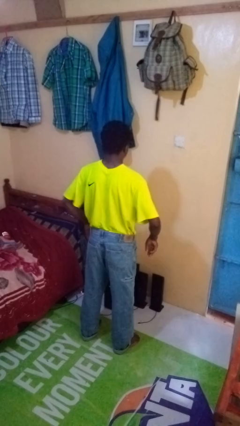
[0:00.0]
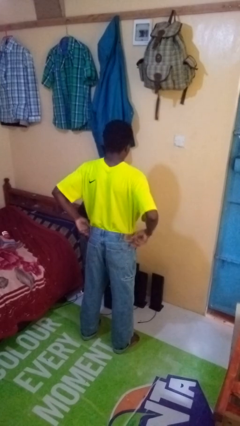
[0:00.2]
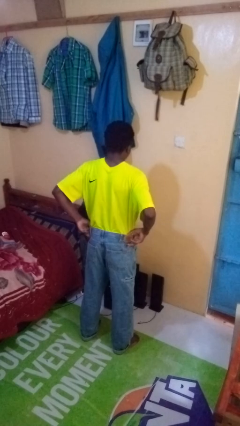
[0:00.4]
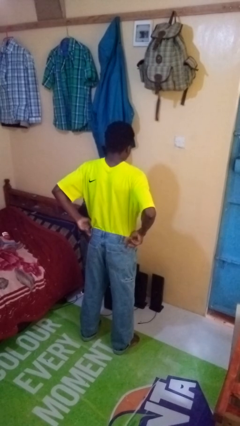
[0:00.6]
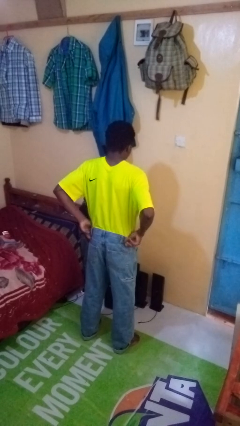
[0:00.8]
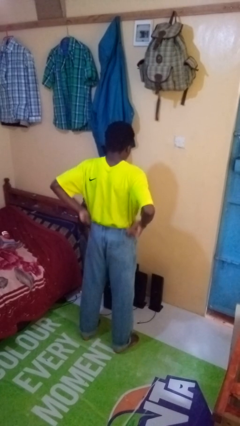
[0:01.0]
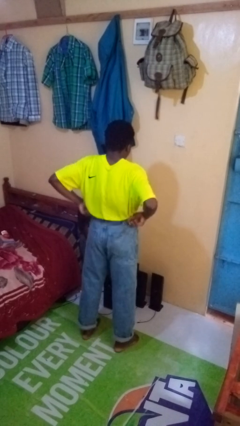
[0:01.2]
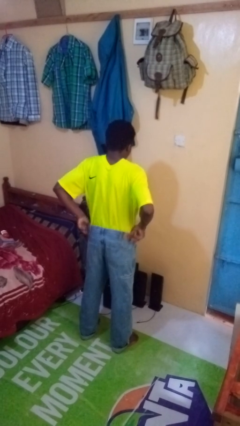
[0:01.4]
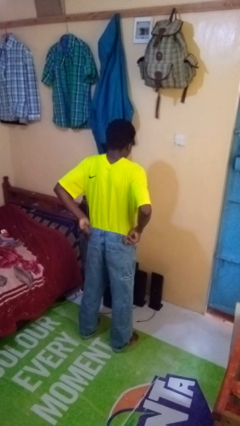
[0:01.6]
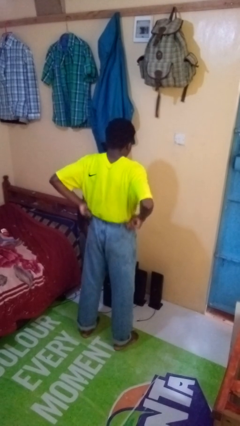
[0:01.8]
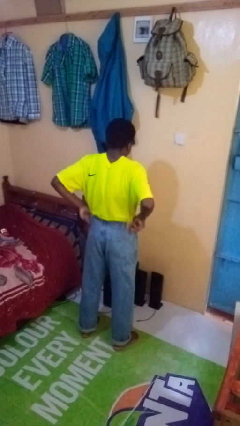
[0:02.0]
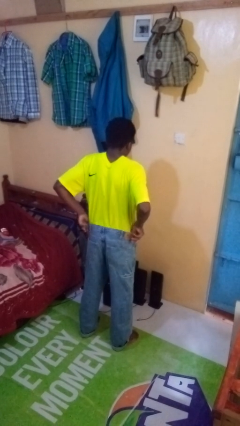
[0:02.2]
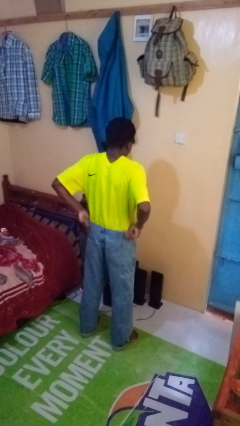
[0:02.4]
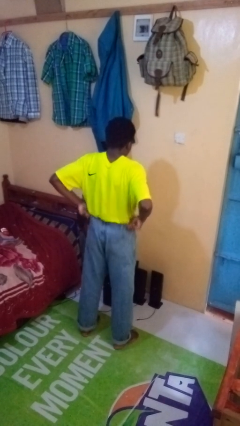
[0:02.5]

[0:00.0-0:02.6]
person hikes up pants

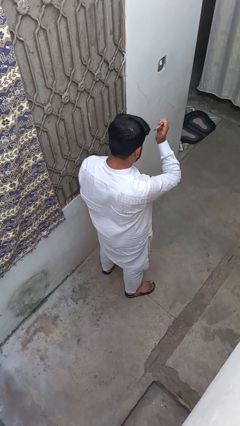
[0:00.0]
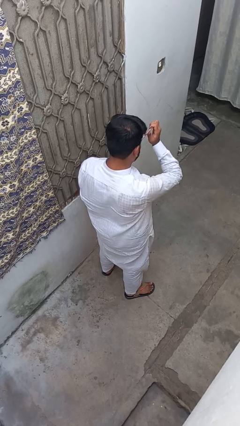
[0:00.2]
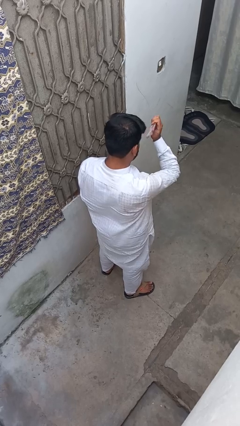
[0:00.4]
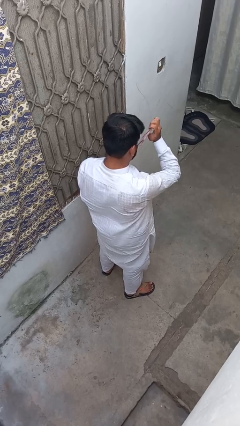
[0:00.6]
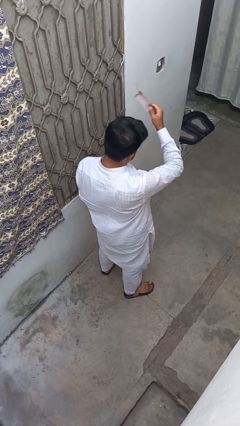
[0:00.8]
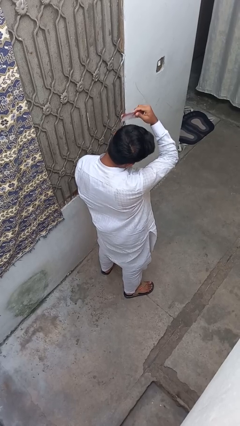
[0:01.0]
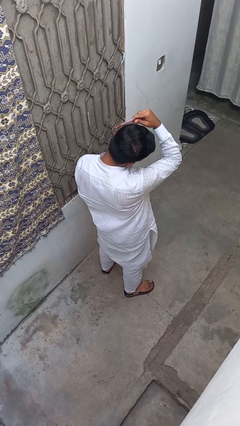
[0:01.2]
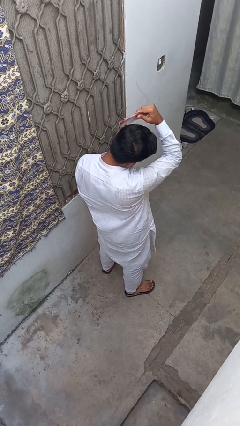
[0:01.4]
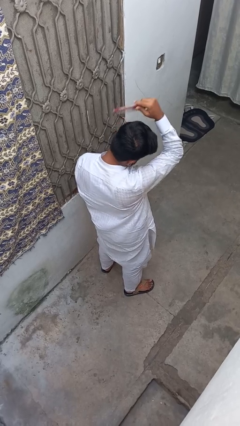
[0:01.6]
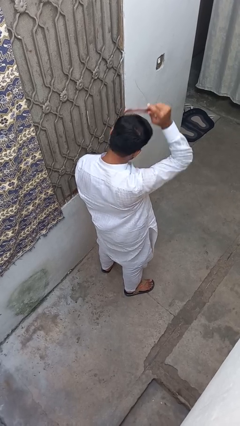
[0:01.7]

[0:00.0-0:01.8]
person brushes hair

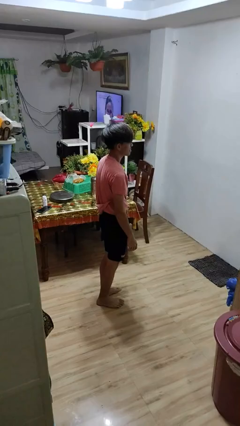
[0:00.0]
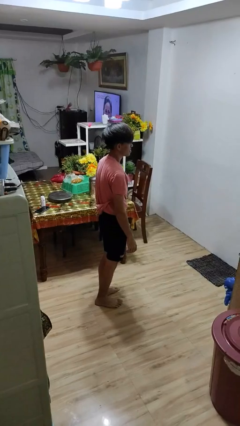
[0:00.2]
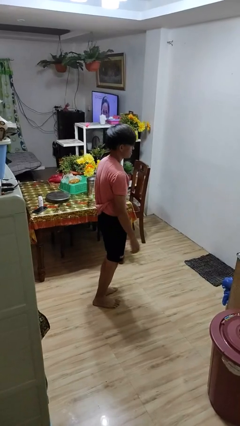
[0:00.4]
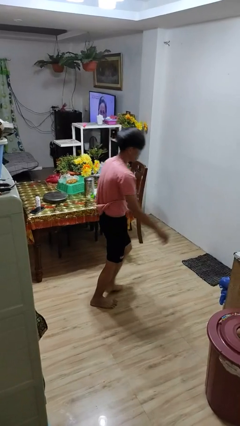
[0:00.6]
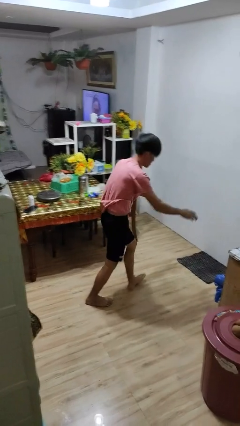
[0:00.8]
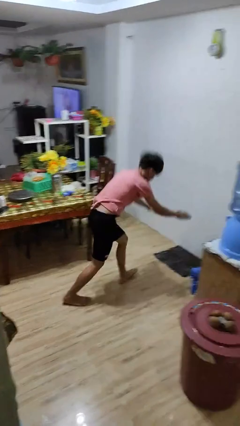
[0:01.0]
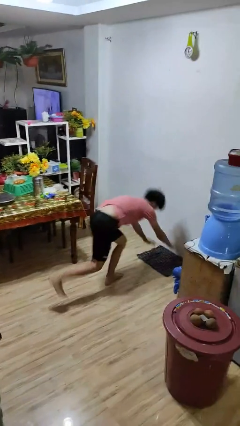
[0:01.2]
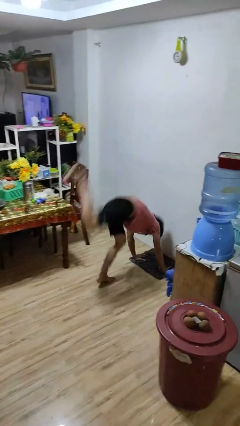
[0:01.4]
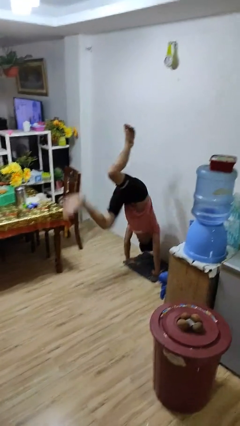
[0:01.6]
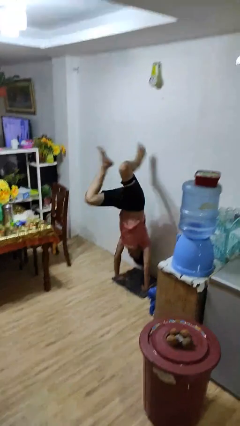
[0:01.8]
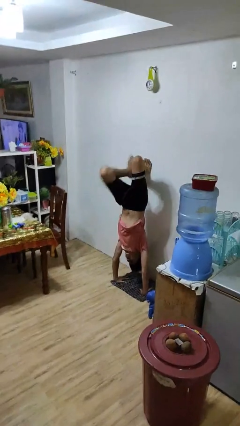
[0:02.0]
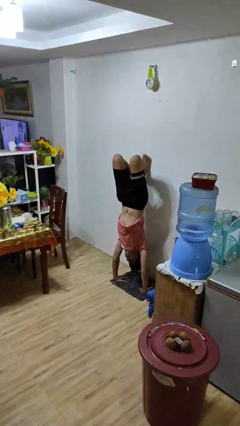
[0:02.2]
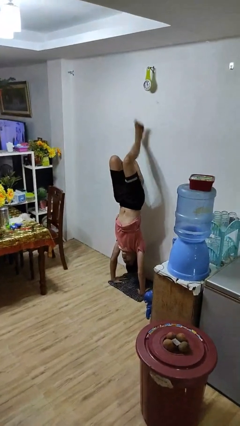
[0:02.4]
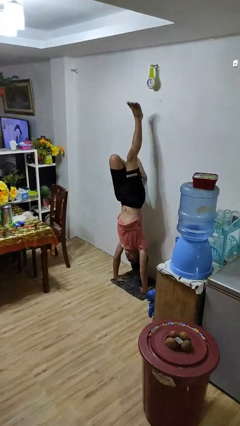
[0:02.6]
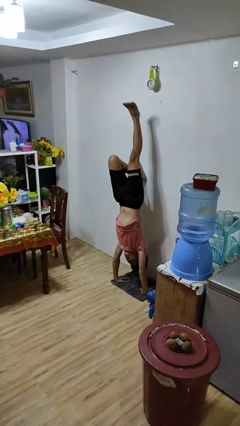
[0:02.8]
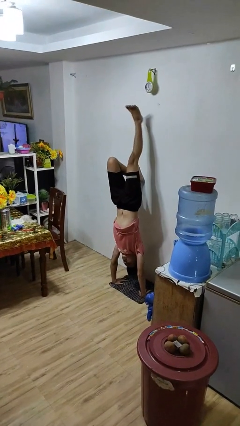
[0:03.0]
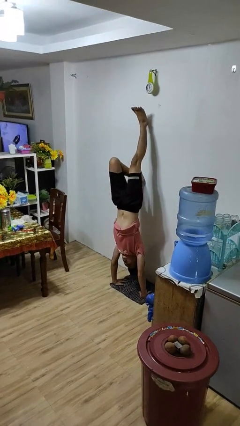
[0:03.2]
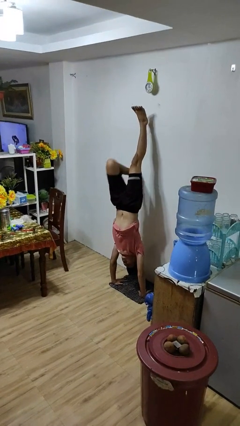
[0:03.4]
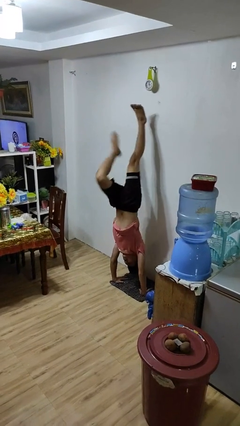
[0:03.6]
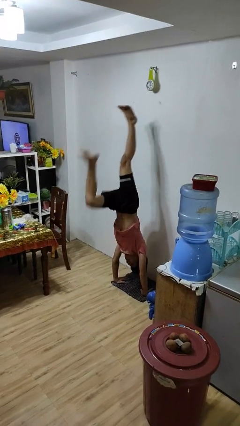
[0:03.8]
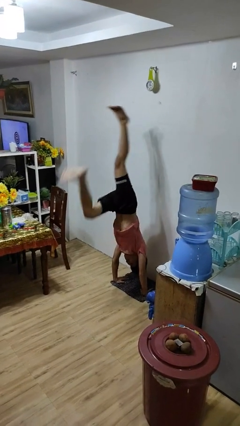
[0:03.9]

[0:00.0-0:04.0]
person handstand

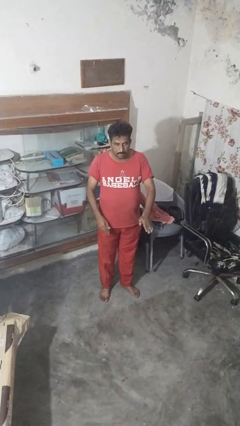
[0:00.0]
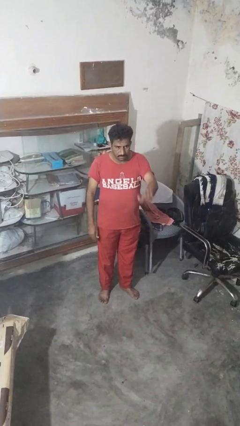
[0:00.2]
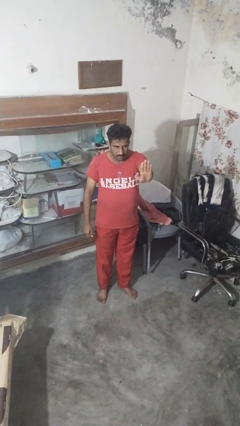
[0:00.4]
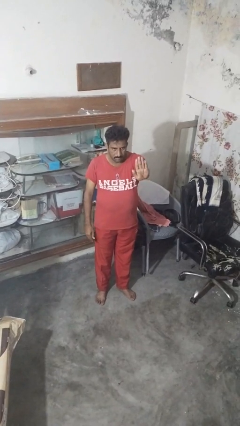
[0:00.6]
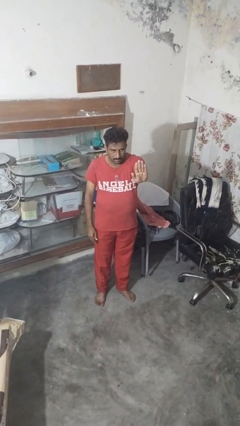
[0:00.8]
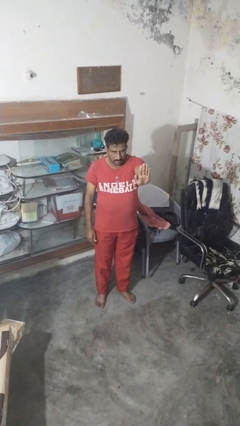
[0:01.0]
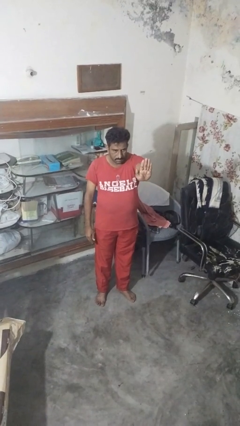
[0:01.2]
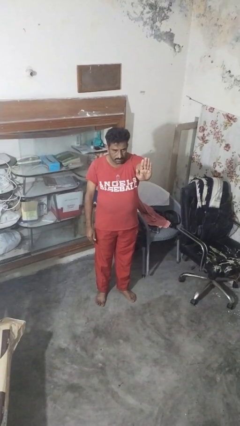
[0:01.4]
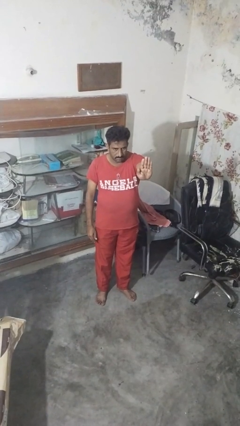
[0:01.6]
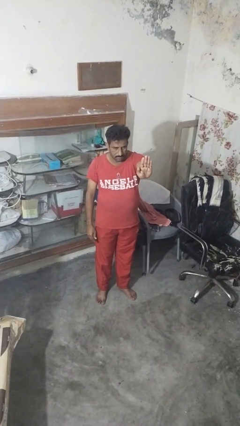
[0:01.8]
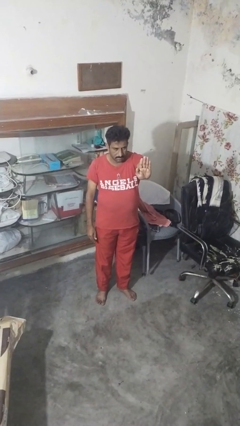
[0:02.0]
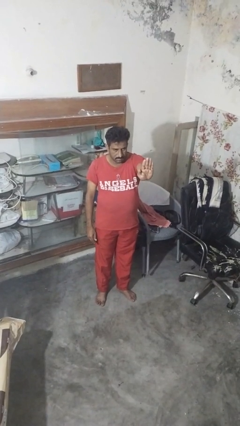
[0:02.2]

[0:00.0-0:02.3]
person gestures stop

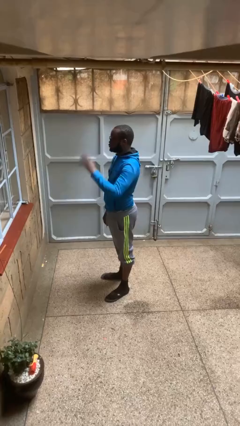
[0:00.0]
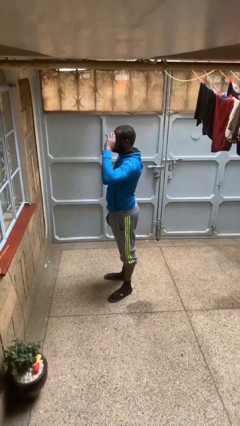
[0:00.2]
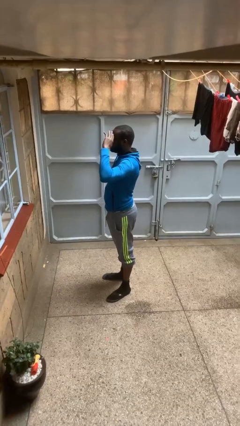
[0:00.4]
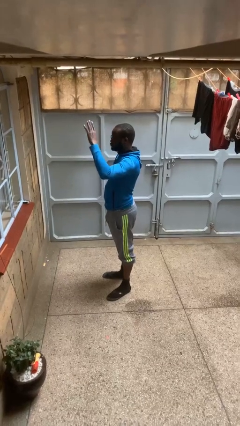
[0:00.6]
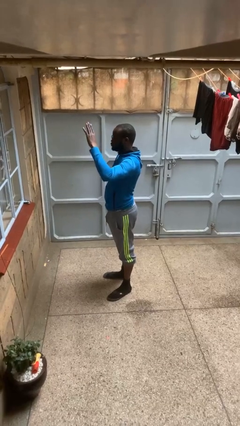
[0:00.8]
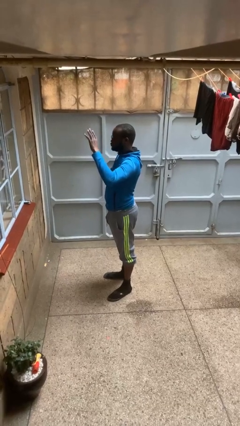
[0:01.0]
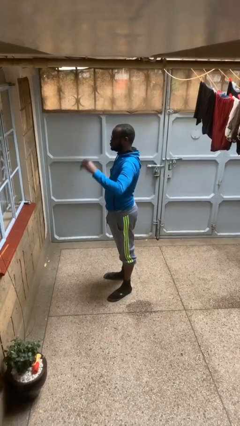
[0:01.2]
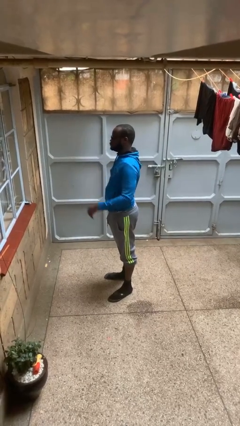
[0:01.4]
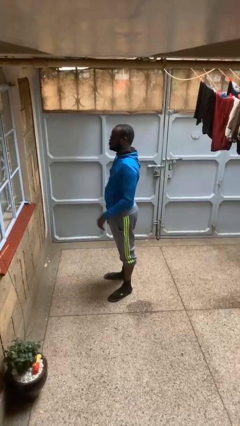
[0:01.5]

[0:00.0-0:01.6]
person salutes

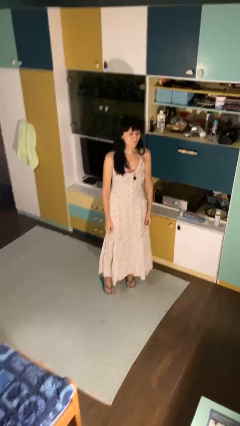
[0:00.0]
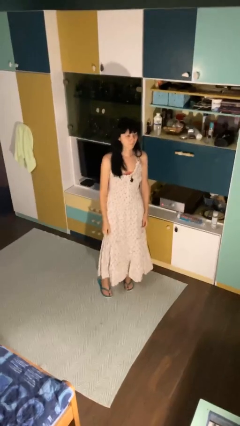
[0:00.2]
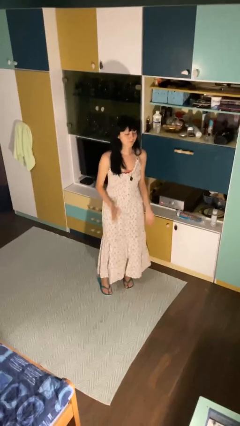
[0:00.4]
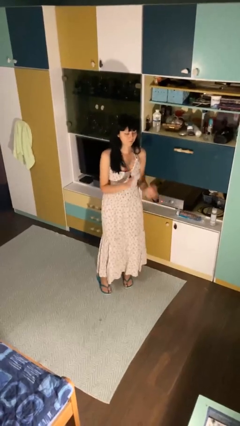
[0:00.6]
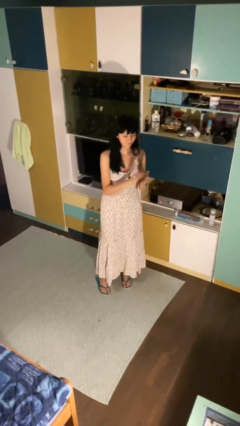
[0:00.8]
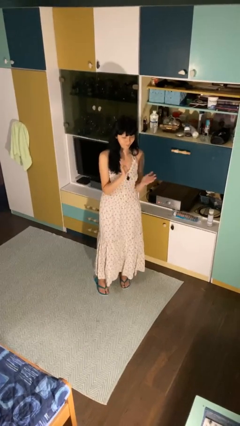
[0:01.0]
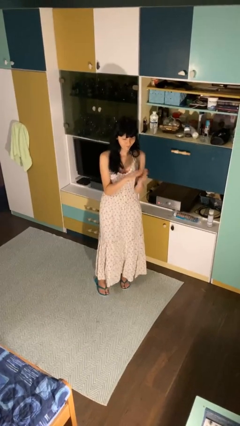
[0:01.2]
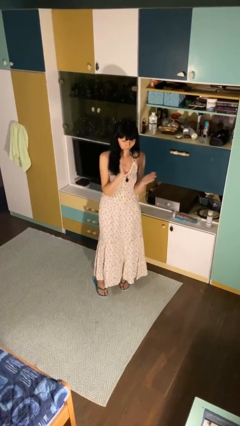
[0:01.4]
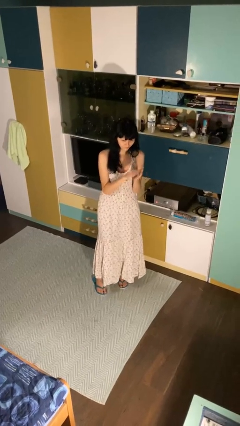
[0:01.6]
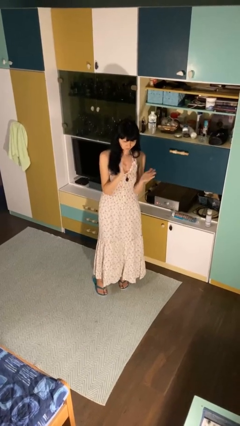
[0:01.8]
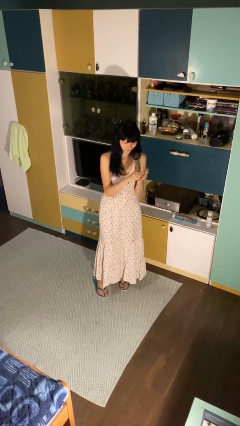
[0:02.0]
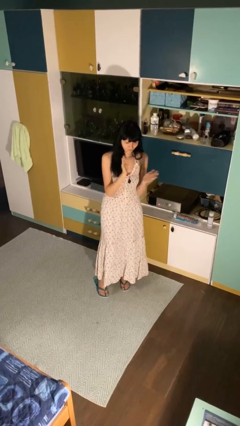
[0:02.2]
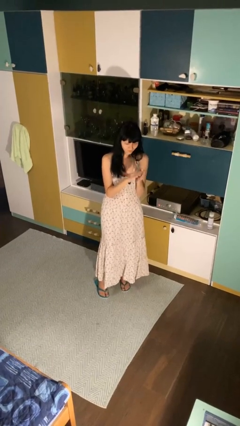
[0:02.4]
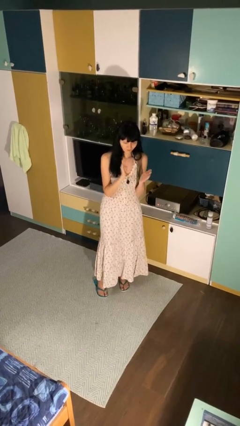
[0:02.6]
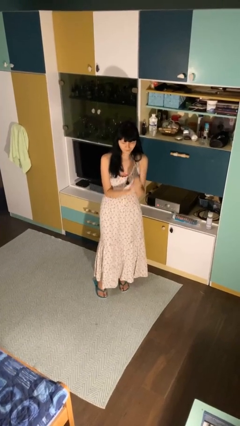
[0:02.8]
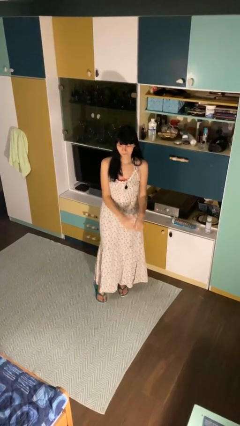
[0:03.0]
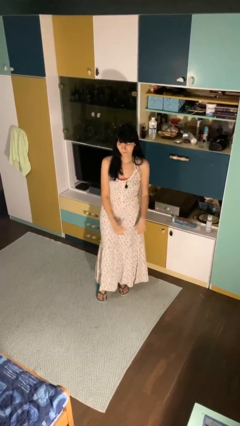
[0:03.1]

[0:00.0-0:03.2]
person claps hands

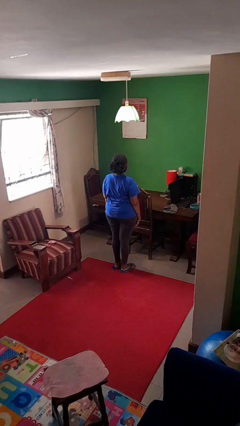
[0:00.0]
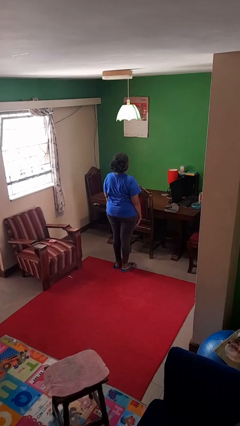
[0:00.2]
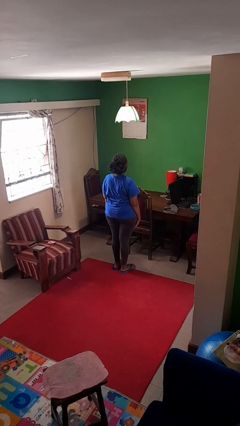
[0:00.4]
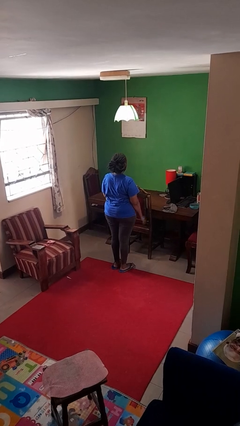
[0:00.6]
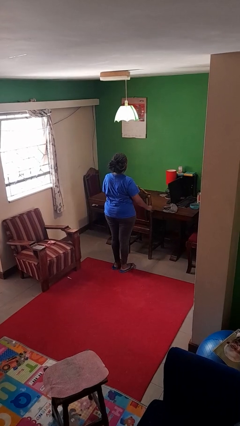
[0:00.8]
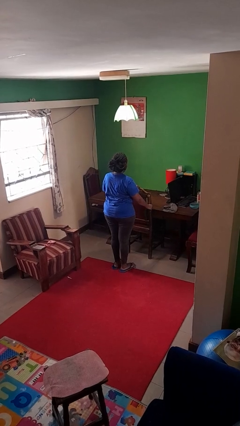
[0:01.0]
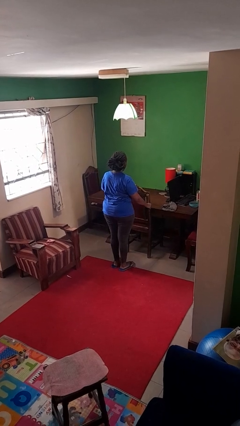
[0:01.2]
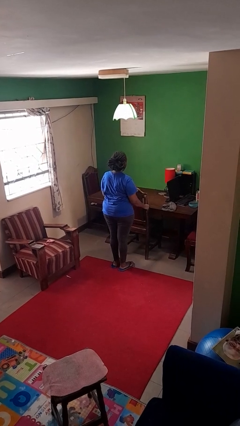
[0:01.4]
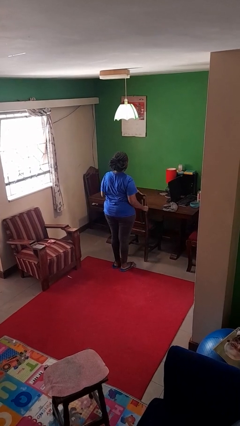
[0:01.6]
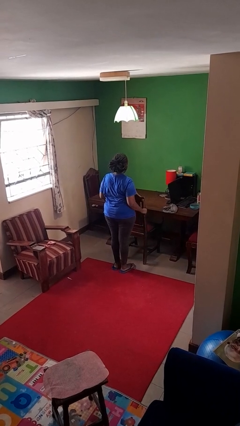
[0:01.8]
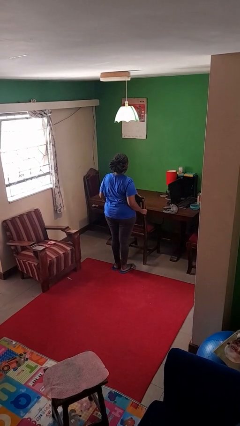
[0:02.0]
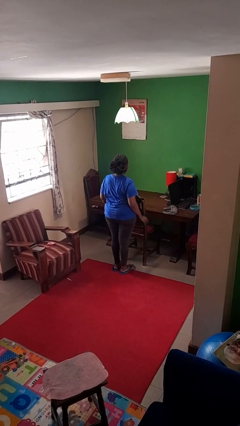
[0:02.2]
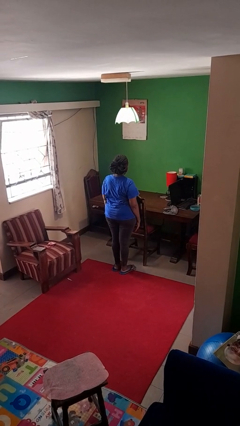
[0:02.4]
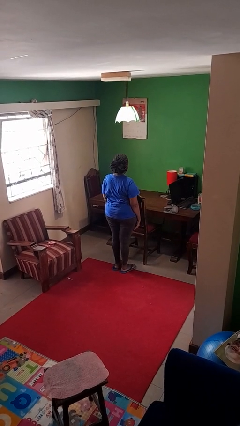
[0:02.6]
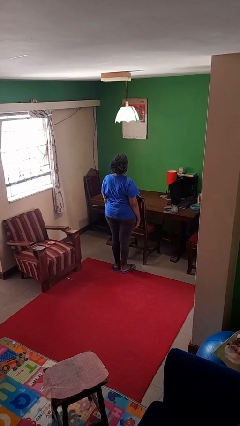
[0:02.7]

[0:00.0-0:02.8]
person pulls out chair
